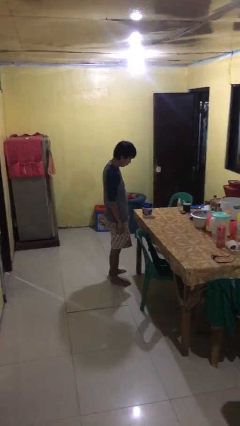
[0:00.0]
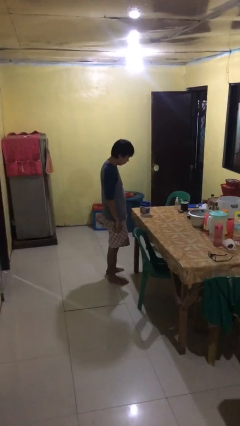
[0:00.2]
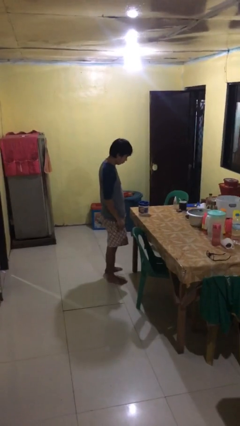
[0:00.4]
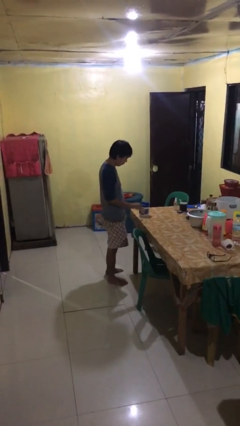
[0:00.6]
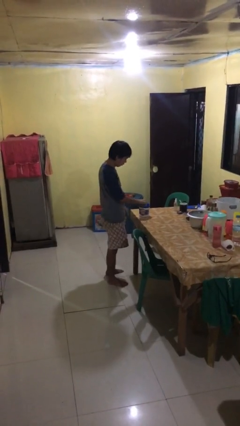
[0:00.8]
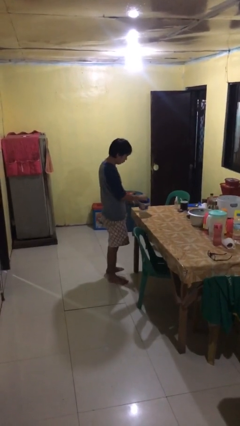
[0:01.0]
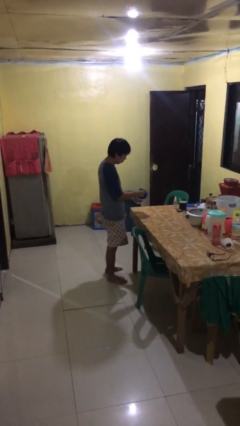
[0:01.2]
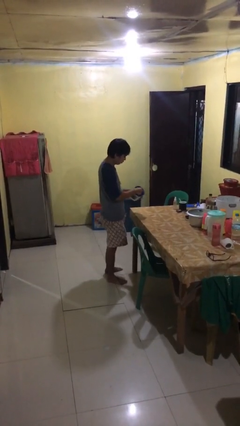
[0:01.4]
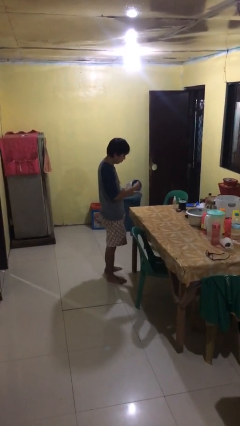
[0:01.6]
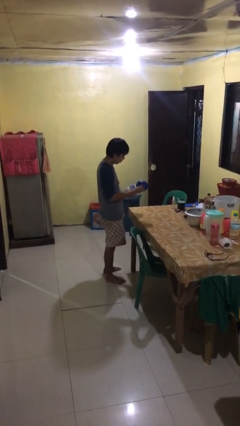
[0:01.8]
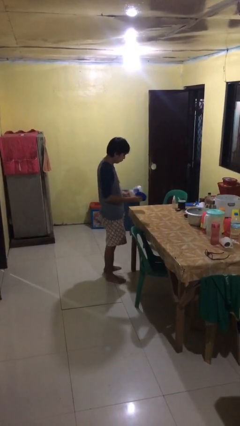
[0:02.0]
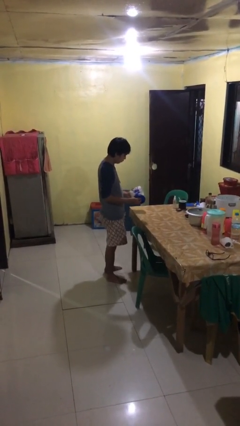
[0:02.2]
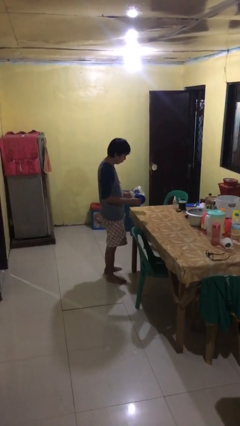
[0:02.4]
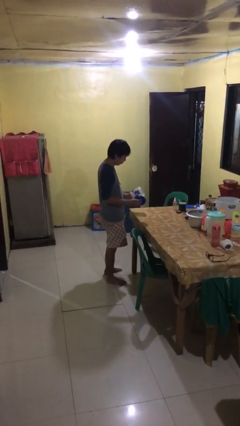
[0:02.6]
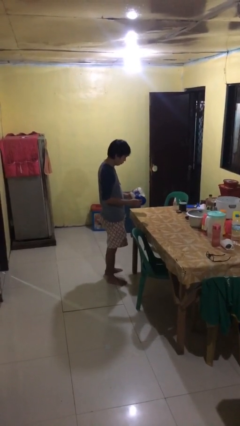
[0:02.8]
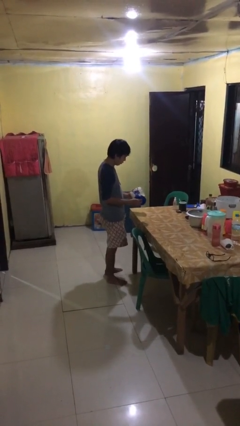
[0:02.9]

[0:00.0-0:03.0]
person opens jar

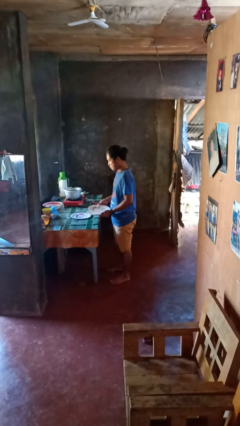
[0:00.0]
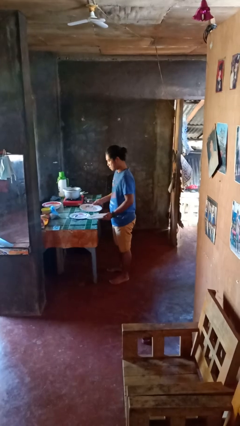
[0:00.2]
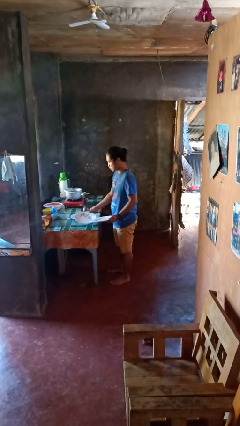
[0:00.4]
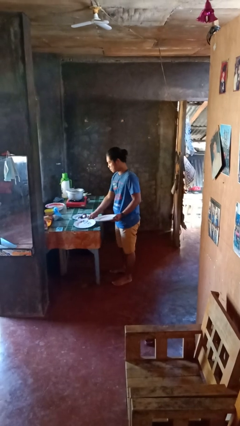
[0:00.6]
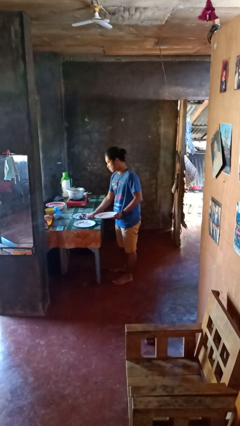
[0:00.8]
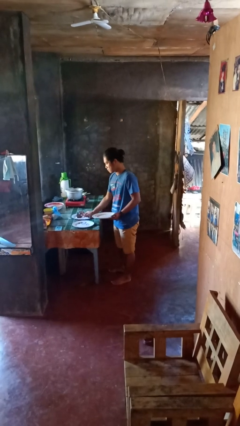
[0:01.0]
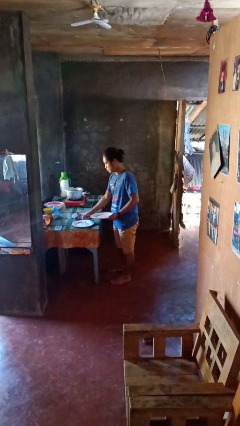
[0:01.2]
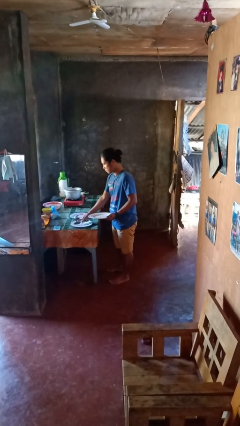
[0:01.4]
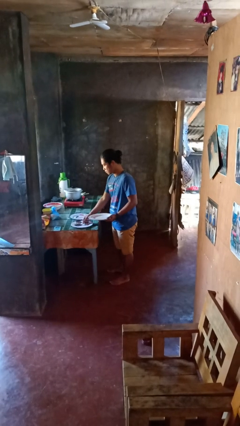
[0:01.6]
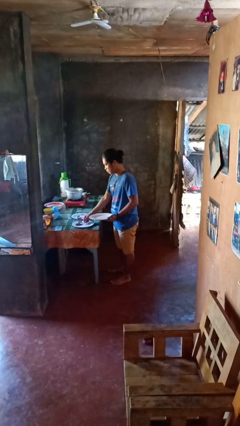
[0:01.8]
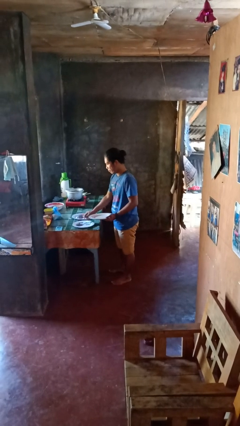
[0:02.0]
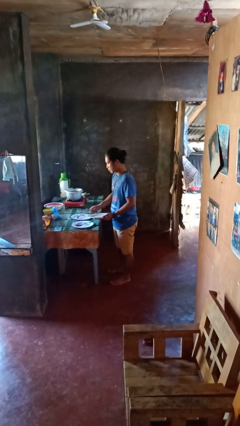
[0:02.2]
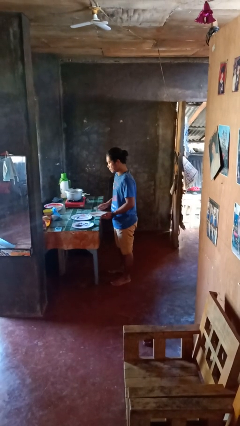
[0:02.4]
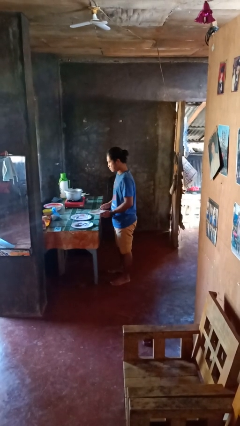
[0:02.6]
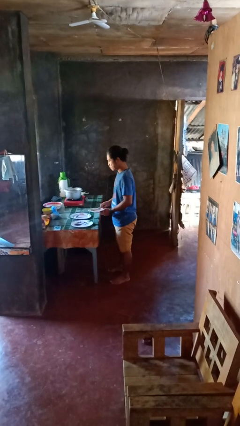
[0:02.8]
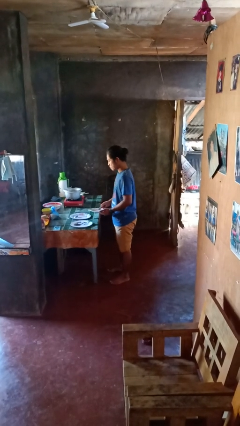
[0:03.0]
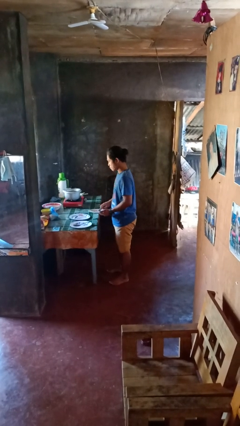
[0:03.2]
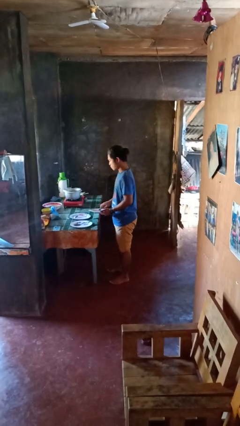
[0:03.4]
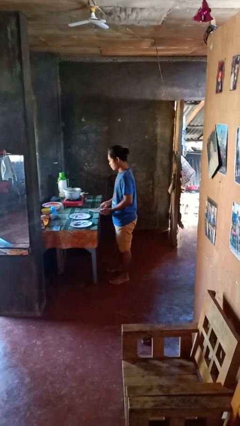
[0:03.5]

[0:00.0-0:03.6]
person sets table

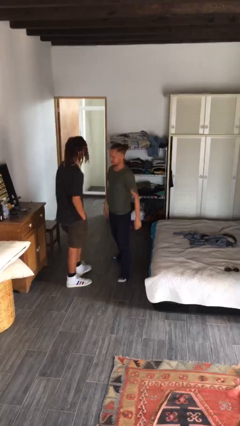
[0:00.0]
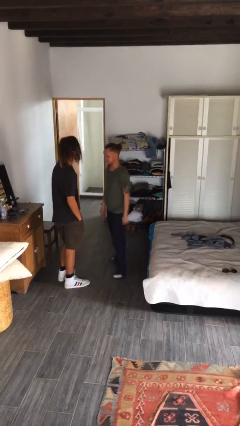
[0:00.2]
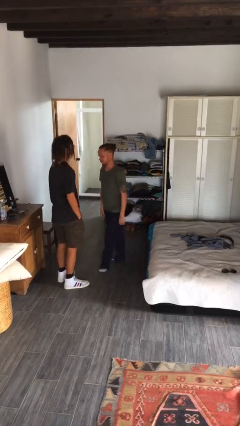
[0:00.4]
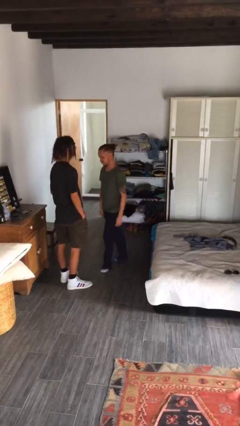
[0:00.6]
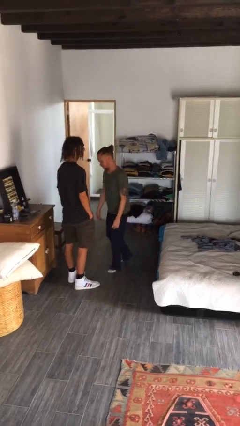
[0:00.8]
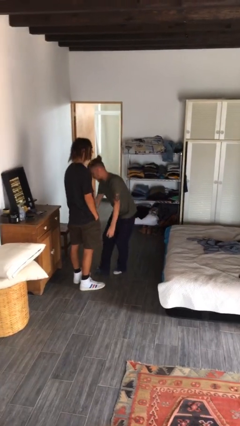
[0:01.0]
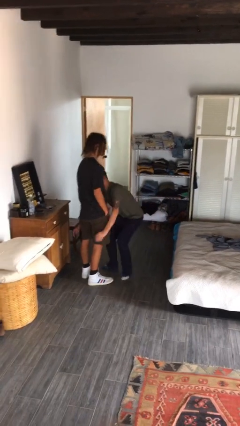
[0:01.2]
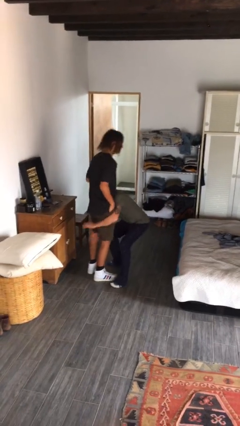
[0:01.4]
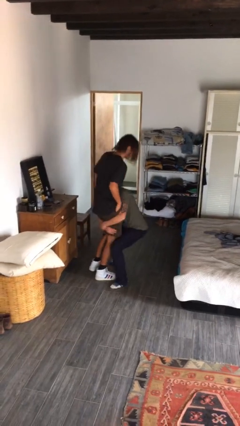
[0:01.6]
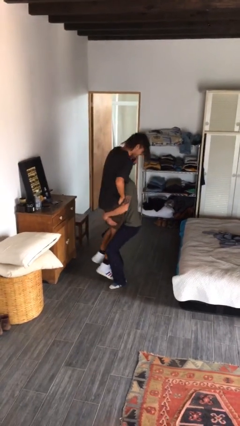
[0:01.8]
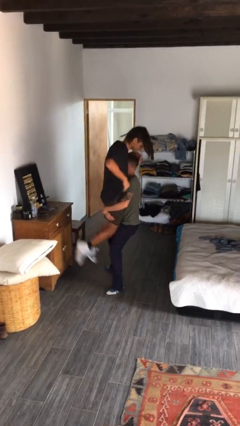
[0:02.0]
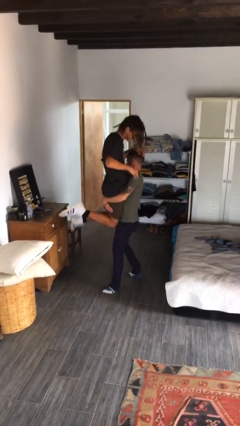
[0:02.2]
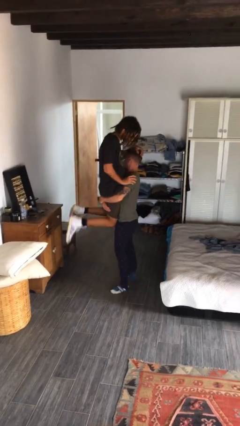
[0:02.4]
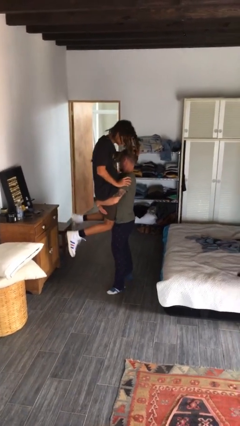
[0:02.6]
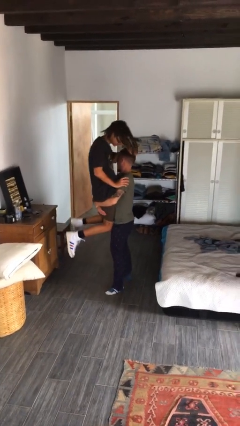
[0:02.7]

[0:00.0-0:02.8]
person picks up person

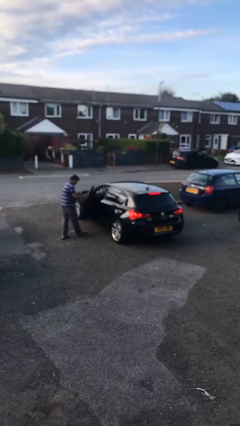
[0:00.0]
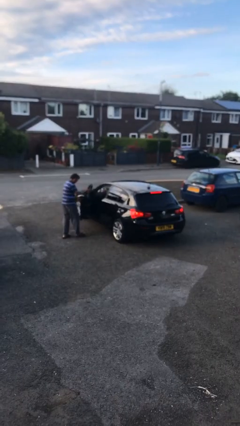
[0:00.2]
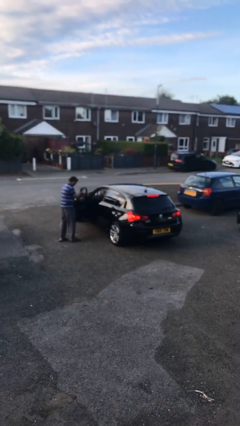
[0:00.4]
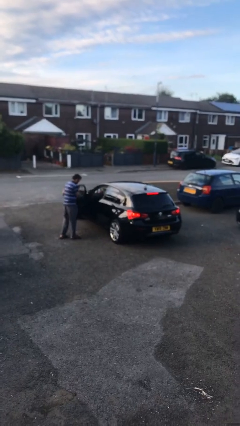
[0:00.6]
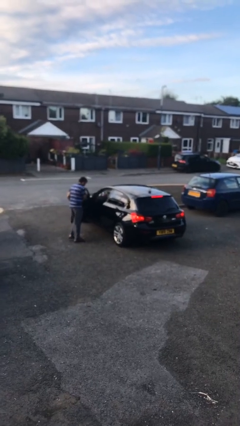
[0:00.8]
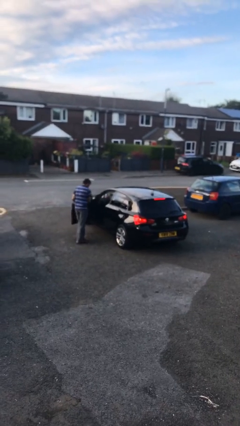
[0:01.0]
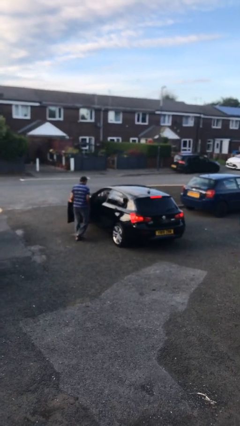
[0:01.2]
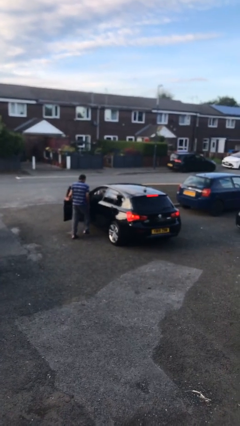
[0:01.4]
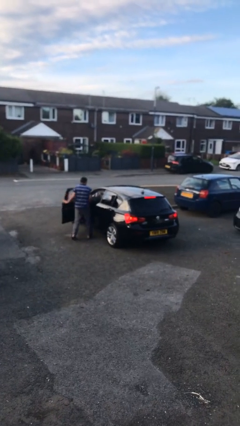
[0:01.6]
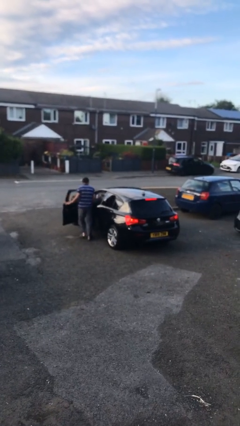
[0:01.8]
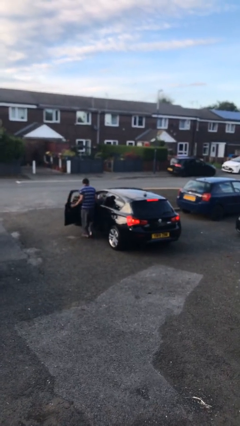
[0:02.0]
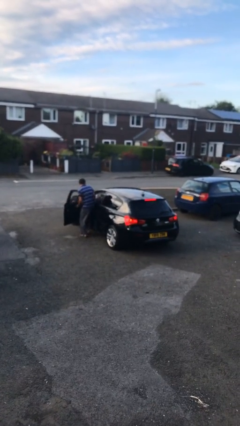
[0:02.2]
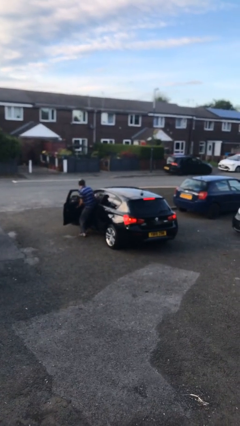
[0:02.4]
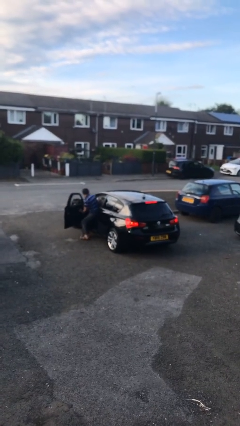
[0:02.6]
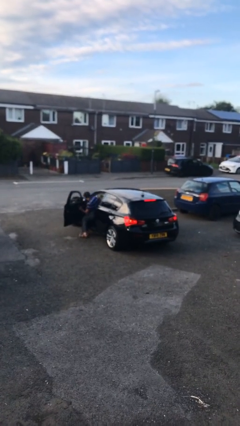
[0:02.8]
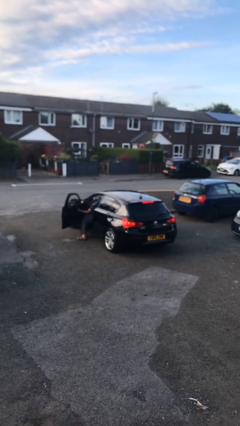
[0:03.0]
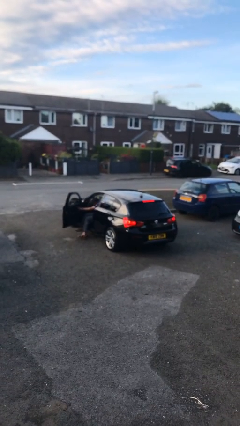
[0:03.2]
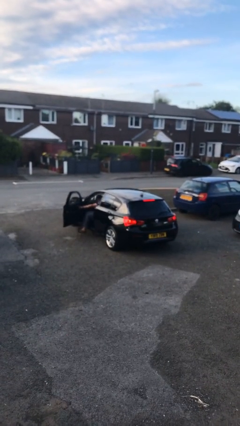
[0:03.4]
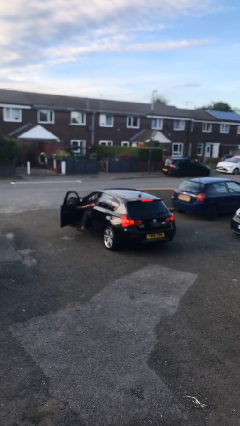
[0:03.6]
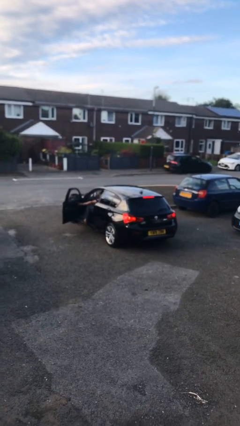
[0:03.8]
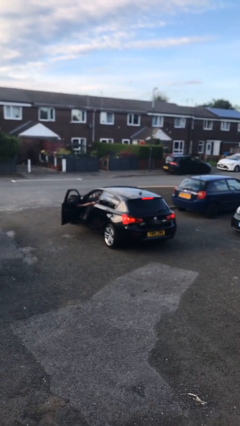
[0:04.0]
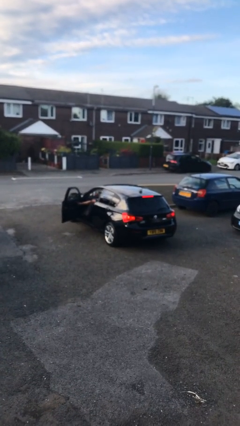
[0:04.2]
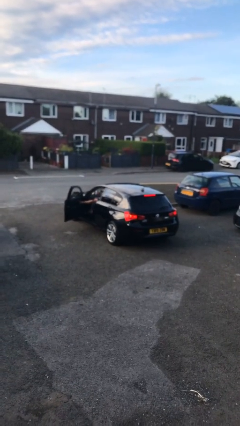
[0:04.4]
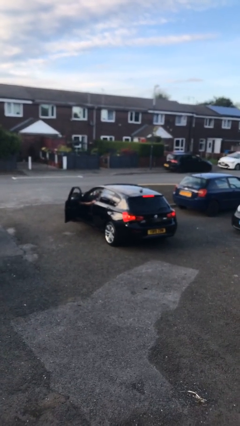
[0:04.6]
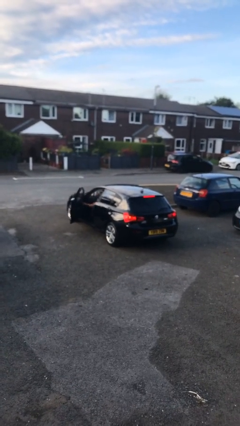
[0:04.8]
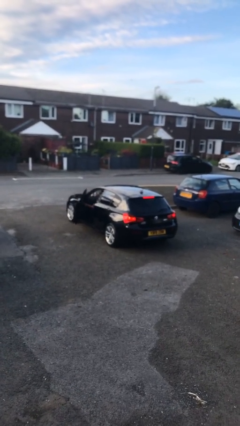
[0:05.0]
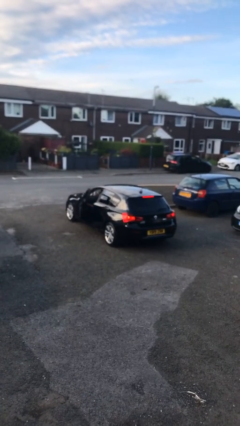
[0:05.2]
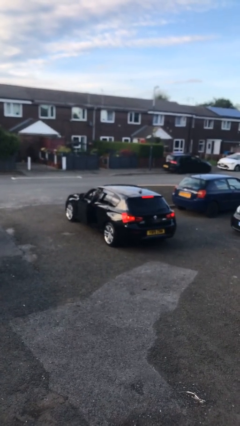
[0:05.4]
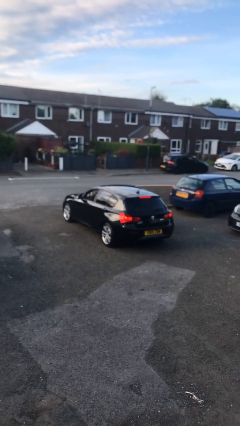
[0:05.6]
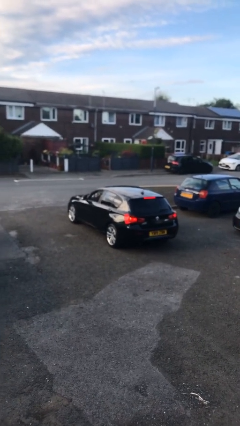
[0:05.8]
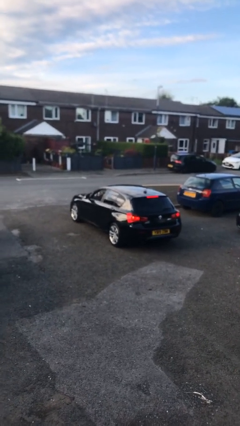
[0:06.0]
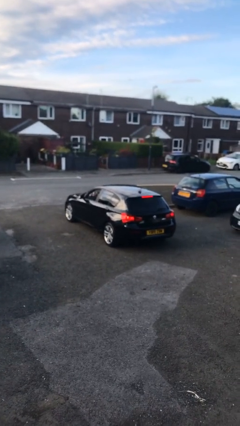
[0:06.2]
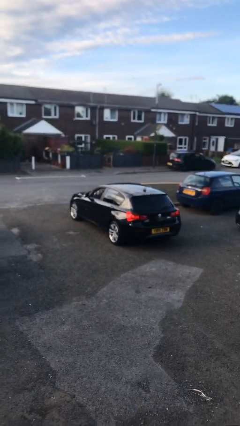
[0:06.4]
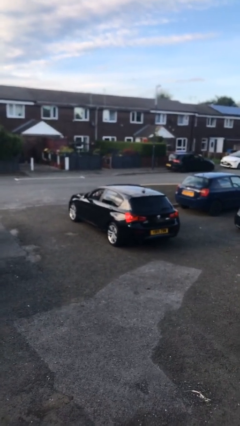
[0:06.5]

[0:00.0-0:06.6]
car picks up person

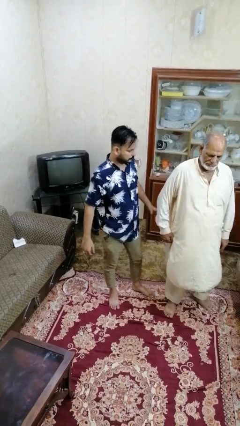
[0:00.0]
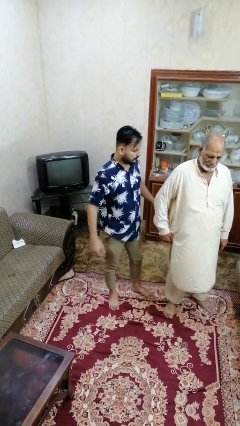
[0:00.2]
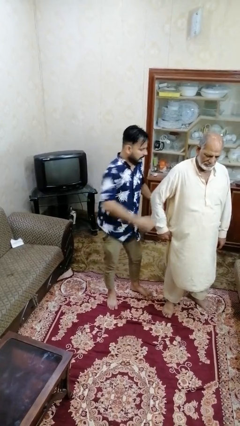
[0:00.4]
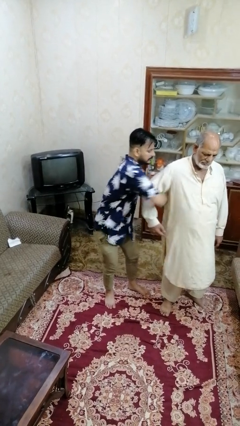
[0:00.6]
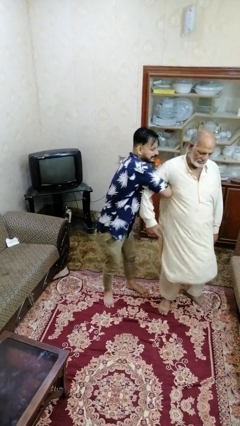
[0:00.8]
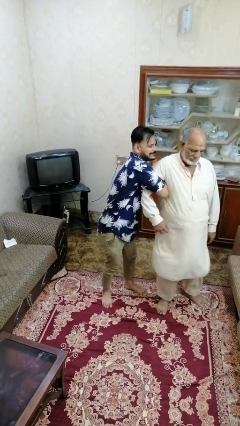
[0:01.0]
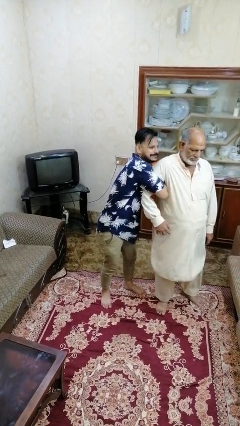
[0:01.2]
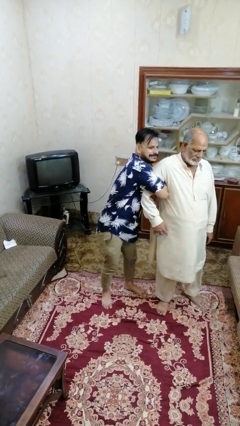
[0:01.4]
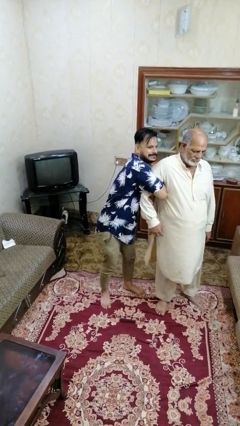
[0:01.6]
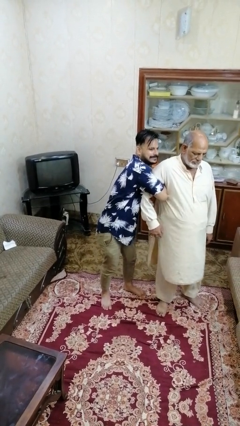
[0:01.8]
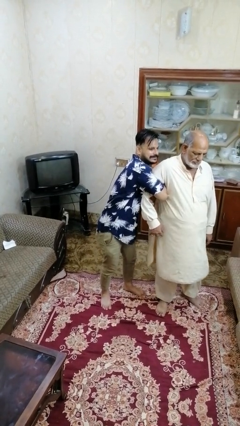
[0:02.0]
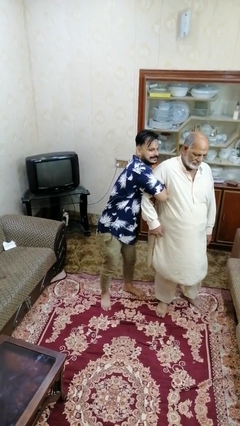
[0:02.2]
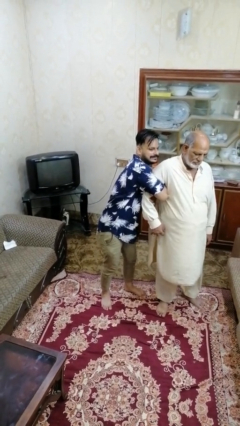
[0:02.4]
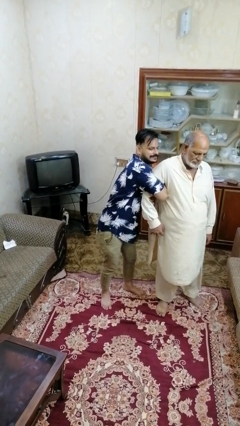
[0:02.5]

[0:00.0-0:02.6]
person grabs person by bicep
